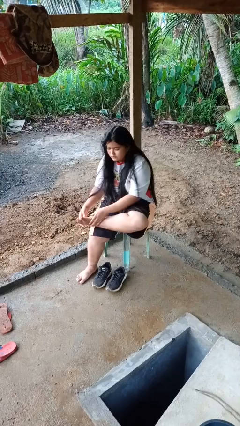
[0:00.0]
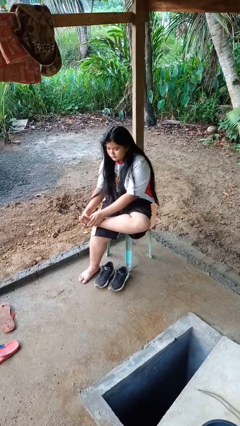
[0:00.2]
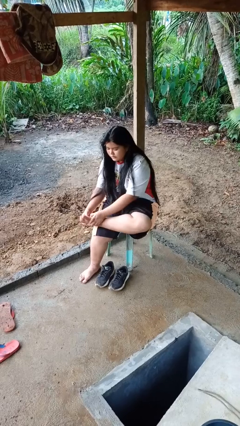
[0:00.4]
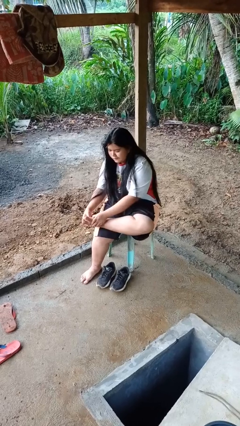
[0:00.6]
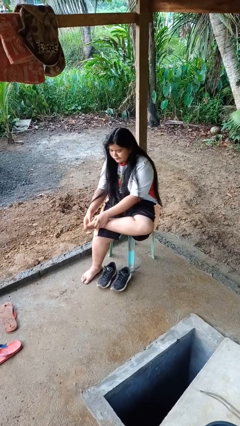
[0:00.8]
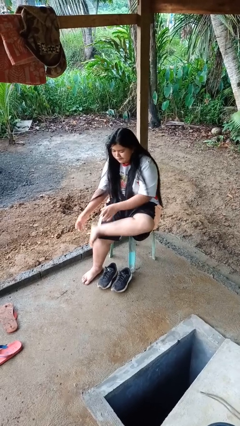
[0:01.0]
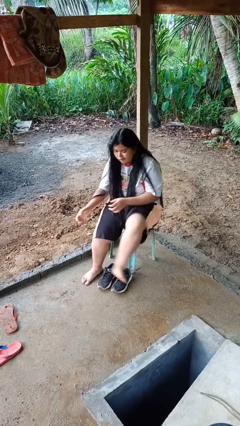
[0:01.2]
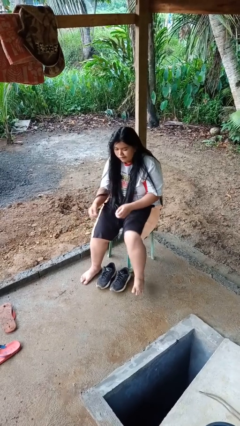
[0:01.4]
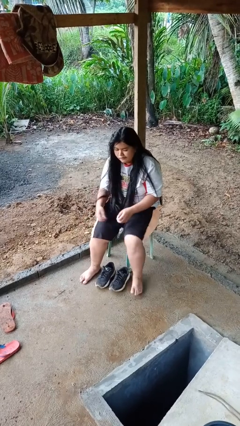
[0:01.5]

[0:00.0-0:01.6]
person rubs foot

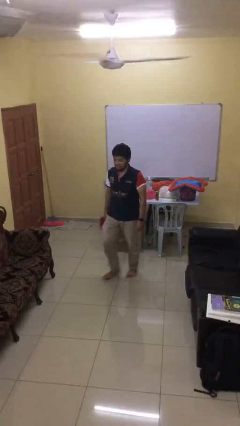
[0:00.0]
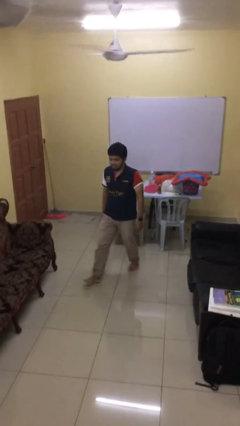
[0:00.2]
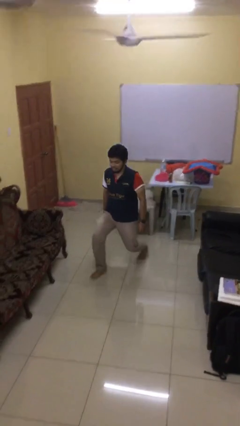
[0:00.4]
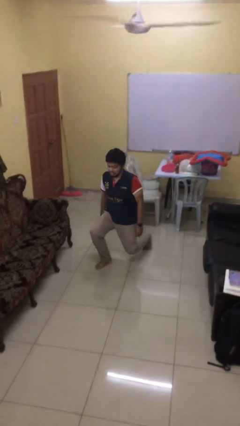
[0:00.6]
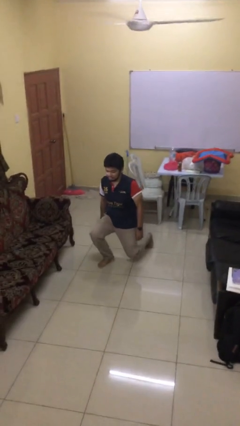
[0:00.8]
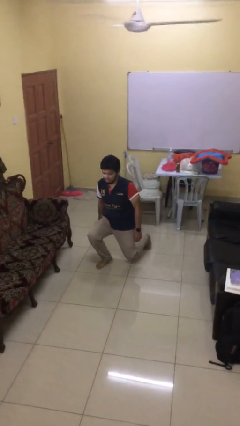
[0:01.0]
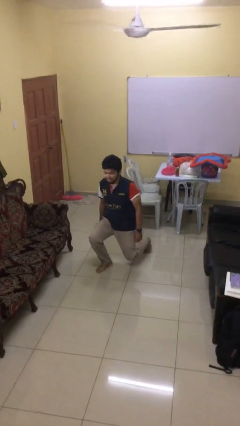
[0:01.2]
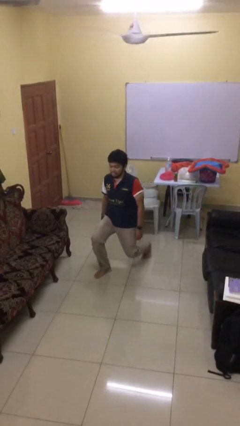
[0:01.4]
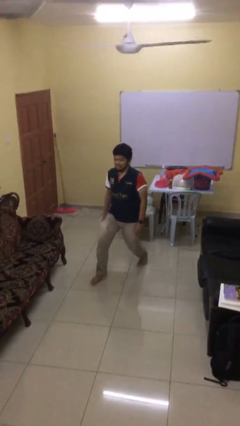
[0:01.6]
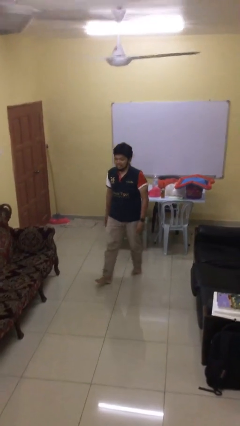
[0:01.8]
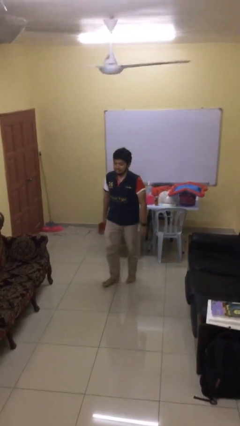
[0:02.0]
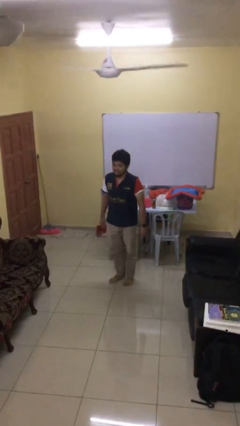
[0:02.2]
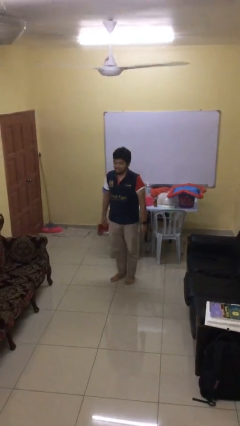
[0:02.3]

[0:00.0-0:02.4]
person exercises with lunges

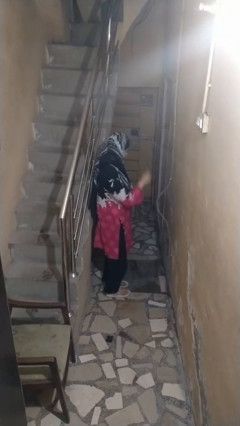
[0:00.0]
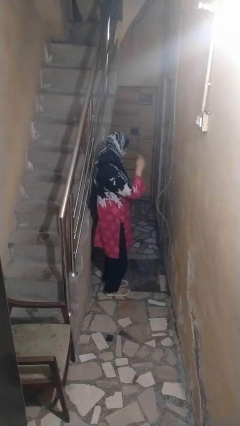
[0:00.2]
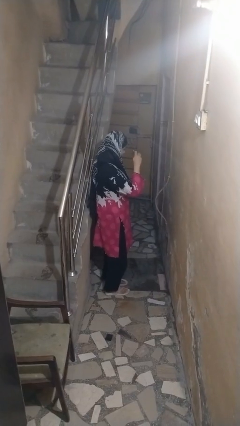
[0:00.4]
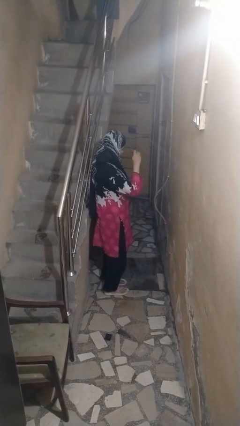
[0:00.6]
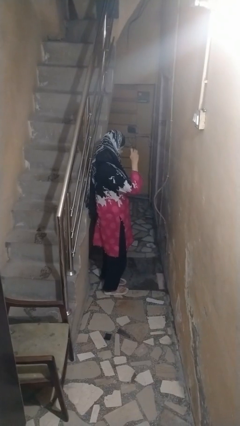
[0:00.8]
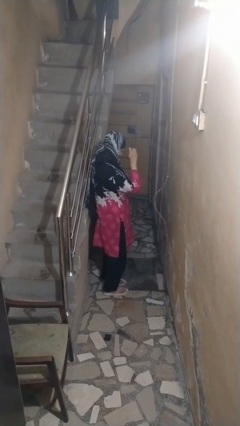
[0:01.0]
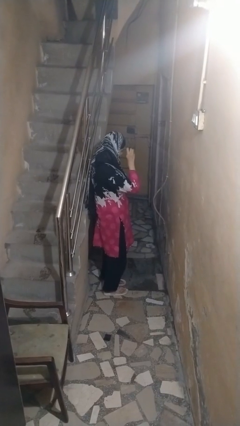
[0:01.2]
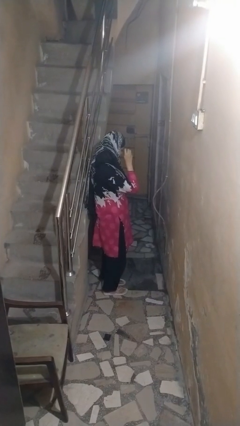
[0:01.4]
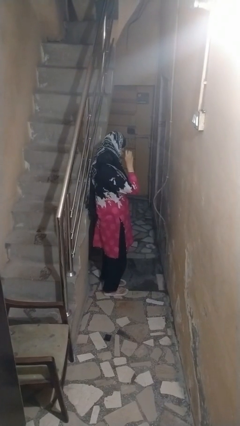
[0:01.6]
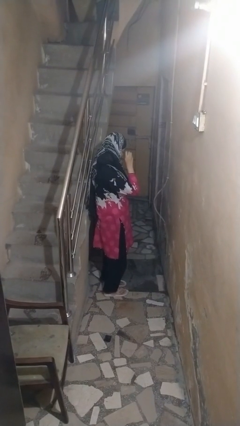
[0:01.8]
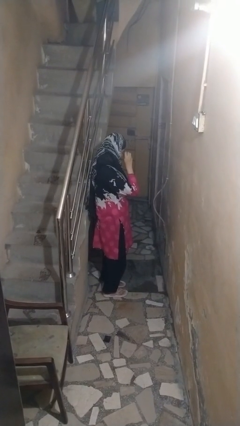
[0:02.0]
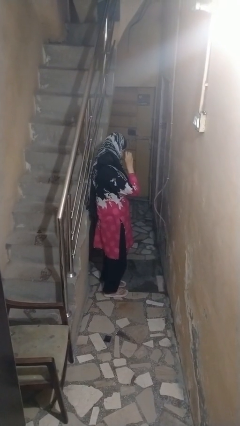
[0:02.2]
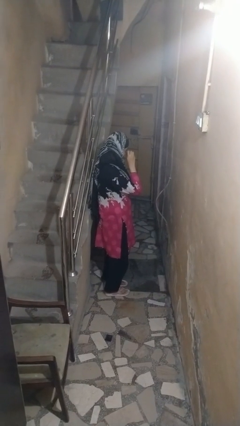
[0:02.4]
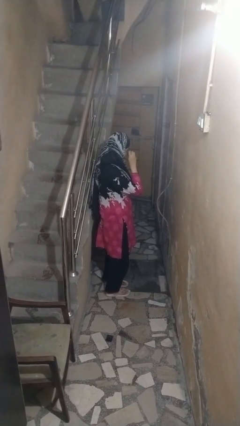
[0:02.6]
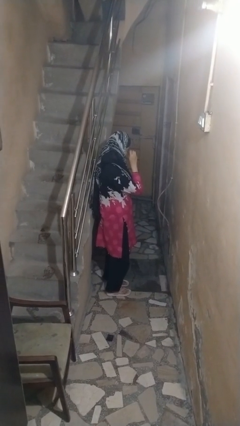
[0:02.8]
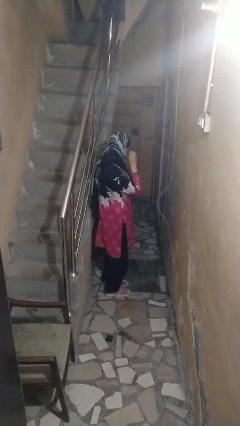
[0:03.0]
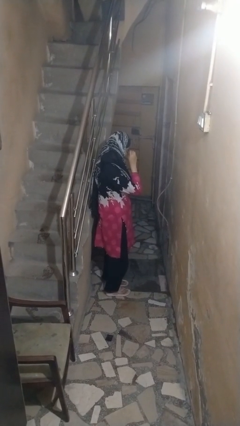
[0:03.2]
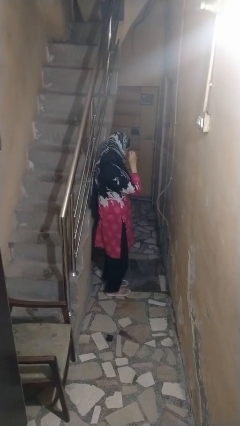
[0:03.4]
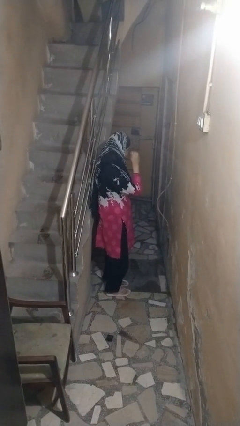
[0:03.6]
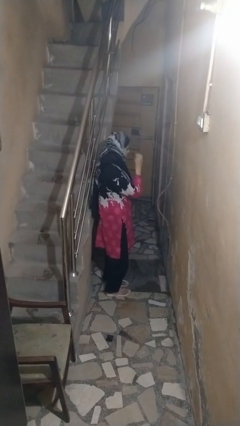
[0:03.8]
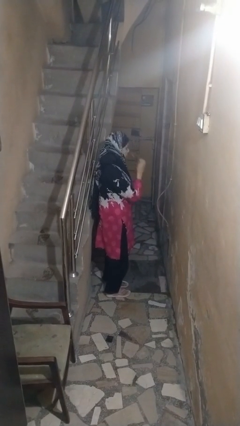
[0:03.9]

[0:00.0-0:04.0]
person puts on glasses

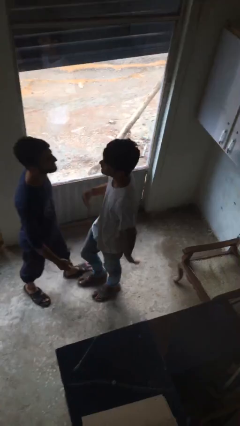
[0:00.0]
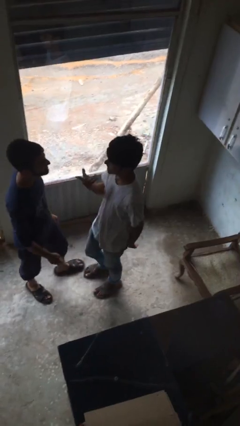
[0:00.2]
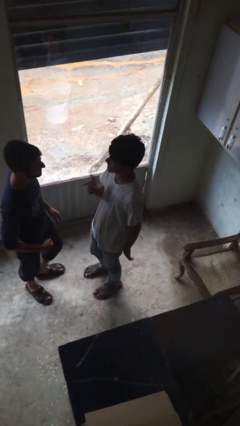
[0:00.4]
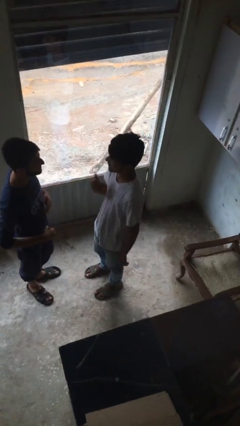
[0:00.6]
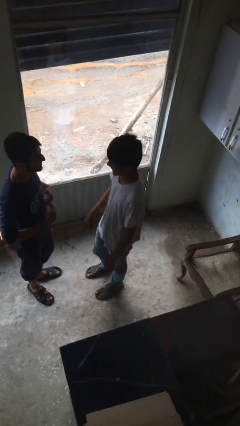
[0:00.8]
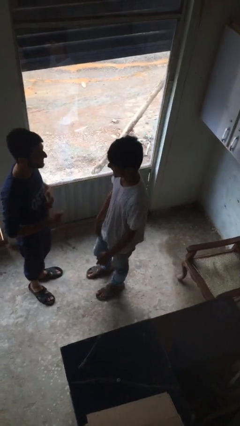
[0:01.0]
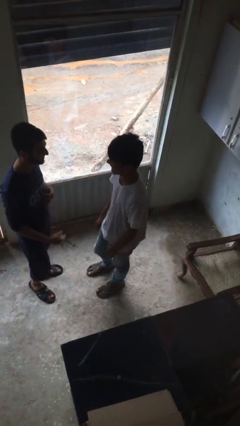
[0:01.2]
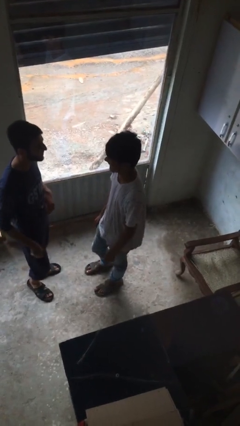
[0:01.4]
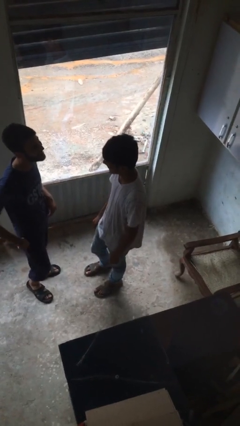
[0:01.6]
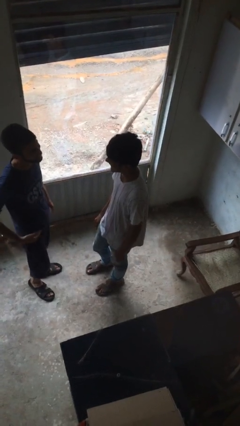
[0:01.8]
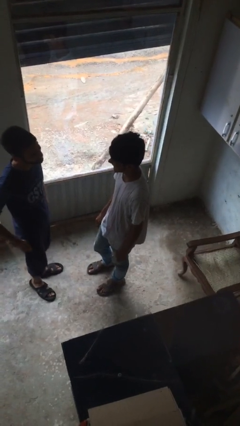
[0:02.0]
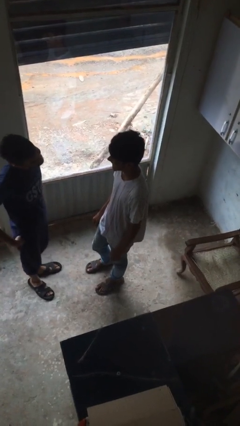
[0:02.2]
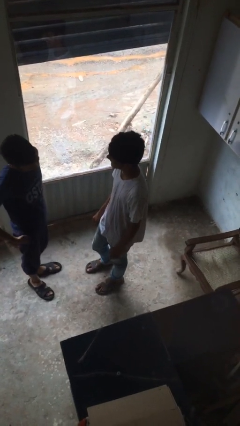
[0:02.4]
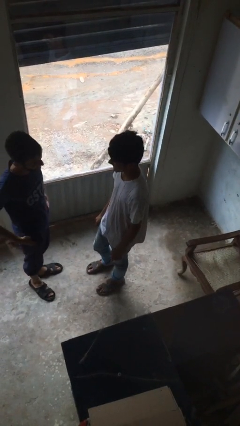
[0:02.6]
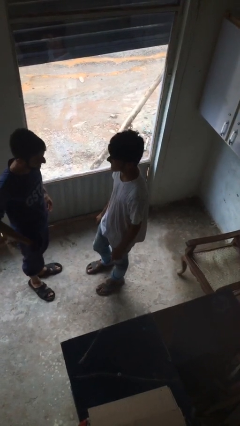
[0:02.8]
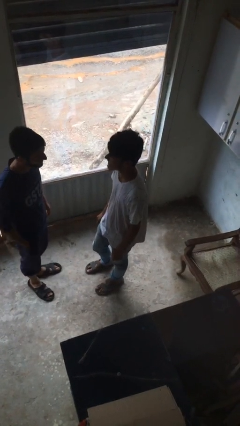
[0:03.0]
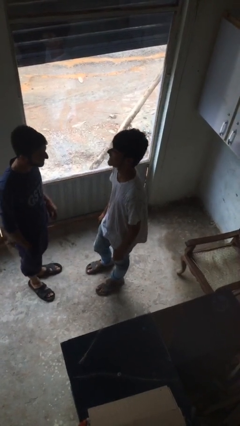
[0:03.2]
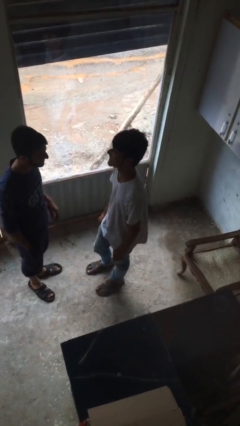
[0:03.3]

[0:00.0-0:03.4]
person talks to person

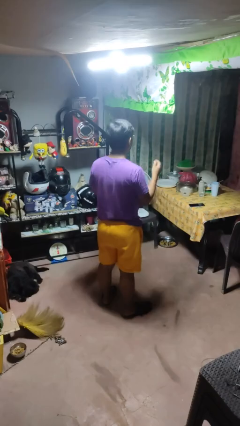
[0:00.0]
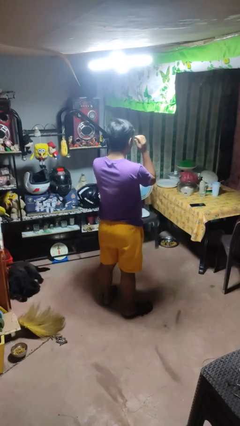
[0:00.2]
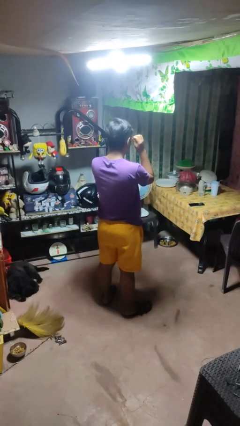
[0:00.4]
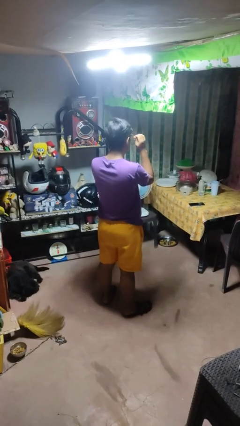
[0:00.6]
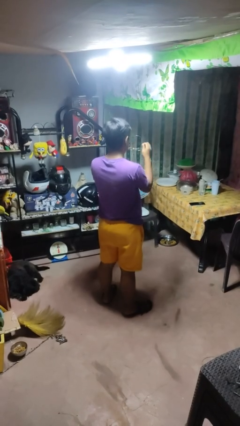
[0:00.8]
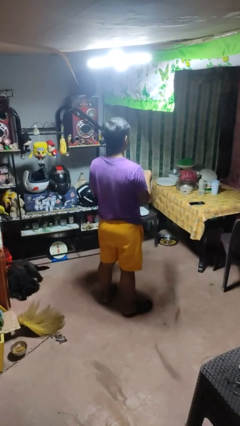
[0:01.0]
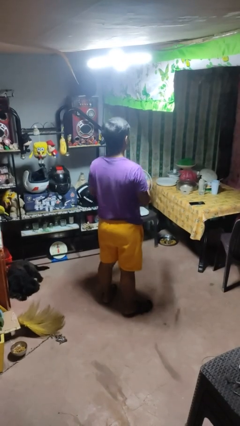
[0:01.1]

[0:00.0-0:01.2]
person takes off glasses

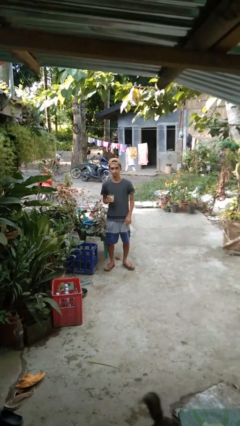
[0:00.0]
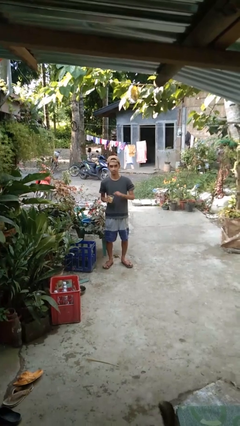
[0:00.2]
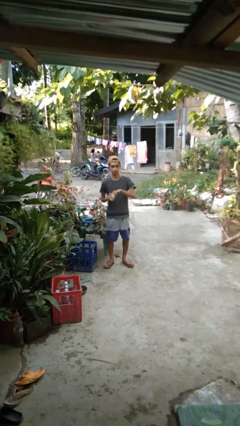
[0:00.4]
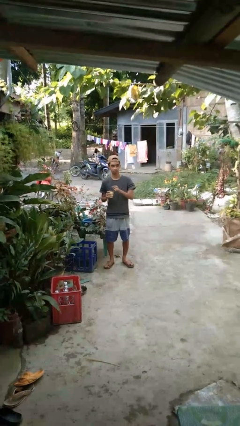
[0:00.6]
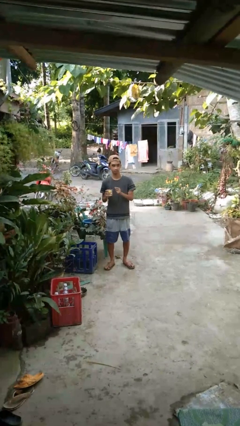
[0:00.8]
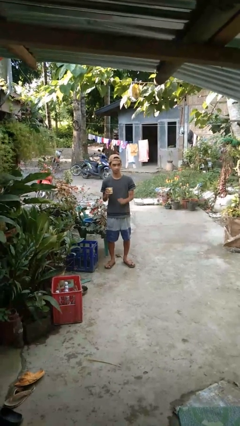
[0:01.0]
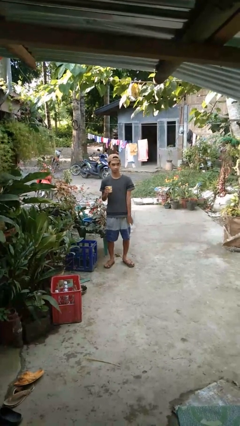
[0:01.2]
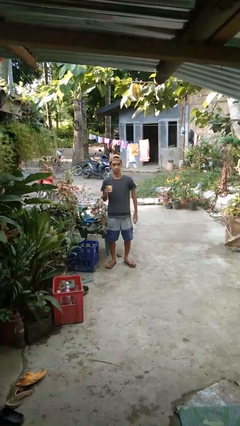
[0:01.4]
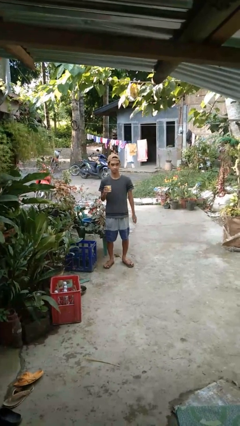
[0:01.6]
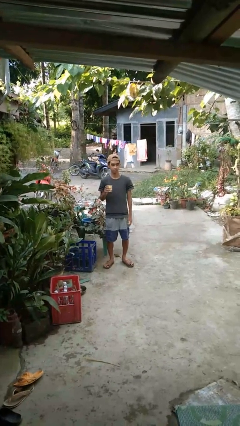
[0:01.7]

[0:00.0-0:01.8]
person opens beverage can

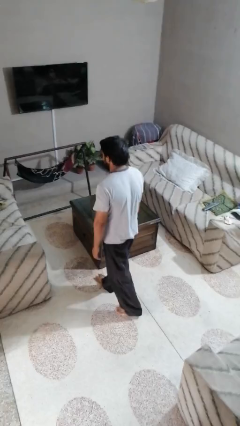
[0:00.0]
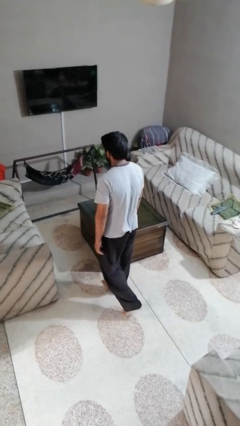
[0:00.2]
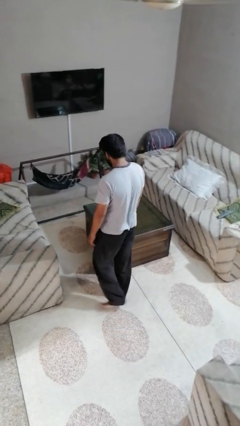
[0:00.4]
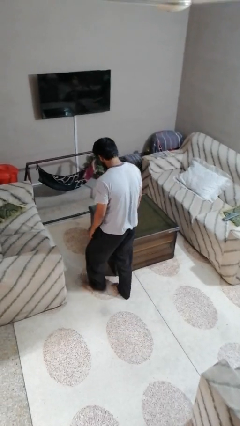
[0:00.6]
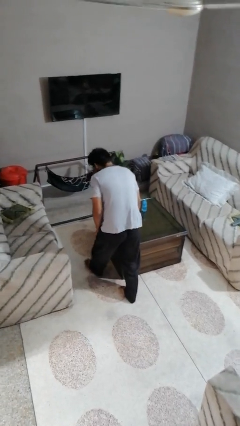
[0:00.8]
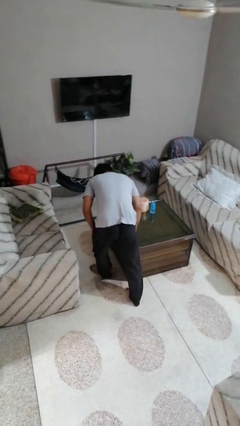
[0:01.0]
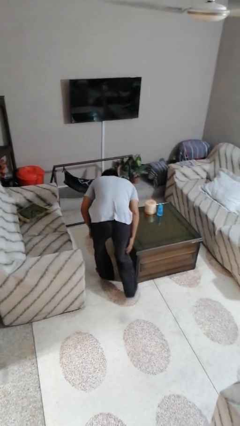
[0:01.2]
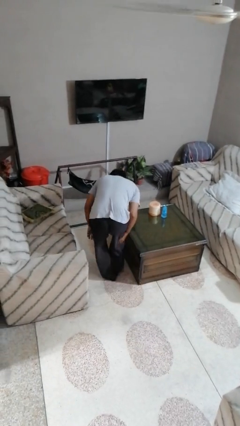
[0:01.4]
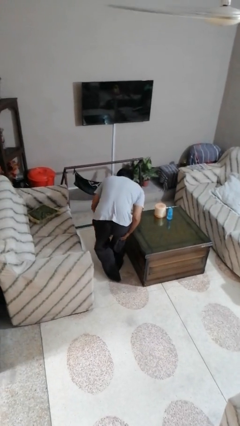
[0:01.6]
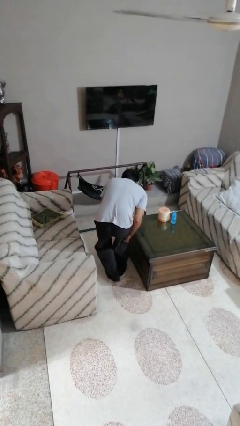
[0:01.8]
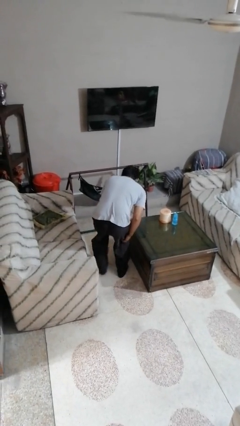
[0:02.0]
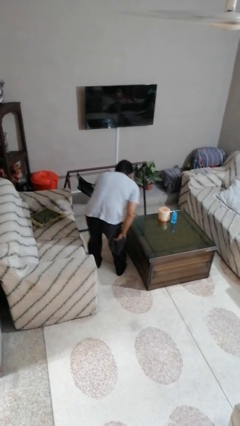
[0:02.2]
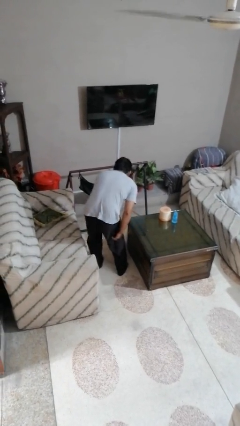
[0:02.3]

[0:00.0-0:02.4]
person bumps into table

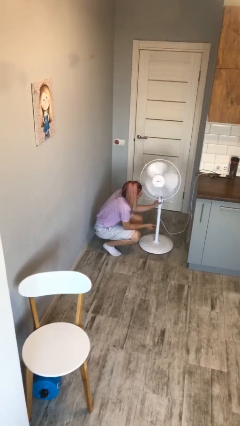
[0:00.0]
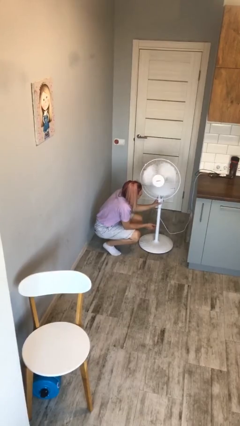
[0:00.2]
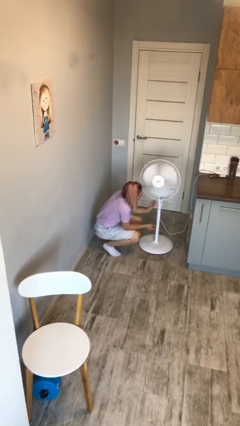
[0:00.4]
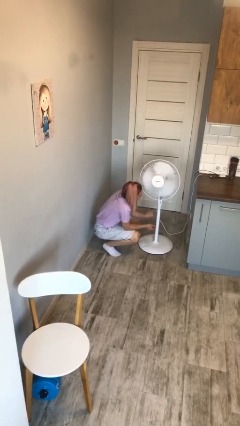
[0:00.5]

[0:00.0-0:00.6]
person turns on fan
